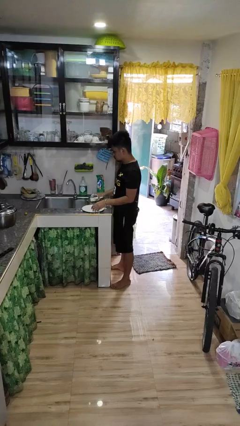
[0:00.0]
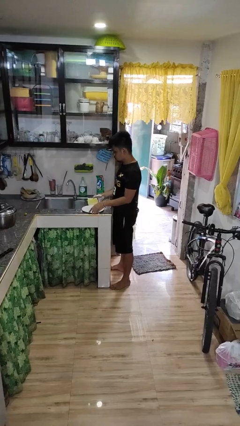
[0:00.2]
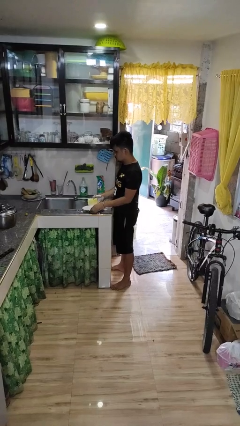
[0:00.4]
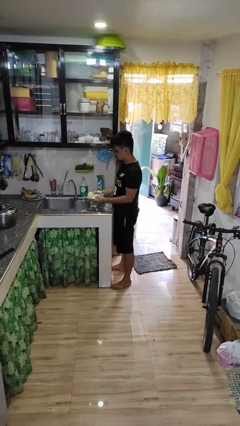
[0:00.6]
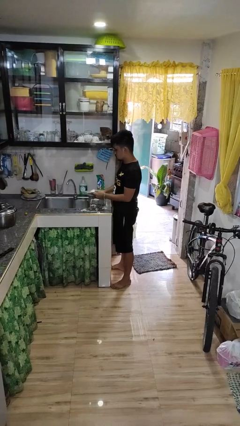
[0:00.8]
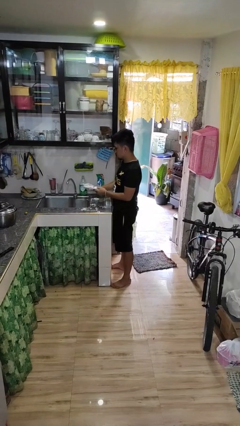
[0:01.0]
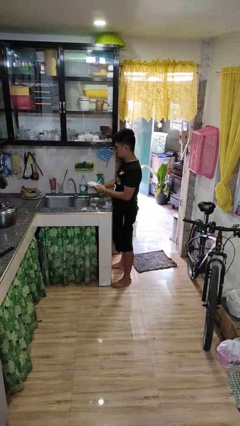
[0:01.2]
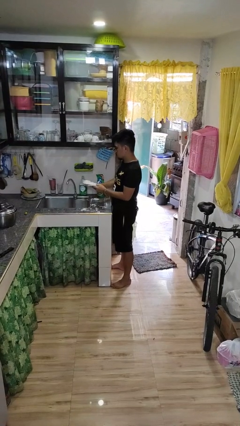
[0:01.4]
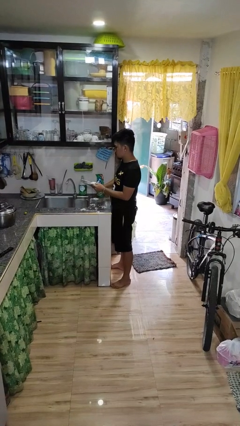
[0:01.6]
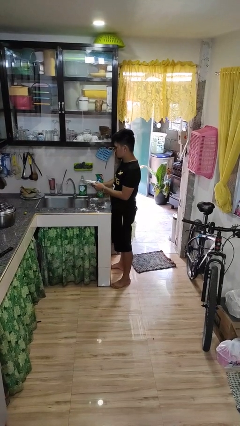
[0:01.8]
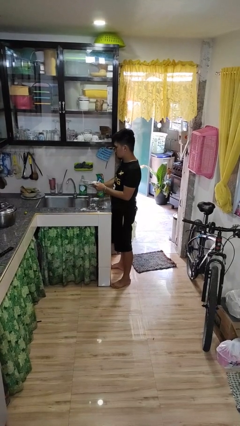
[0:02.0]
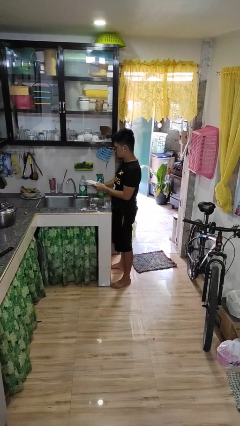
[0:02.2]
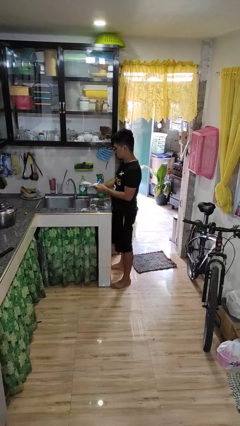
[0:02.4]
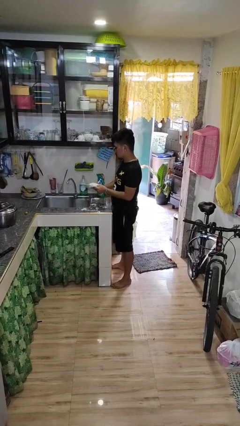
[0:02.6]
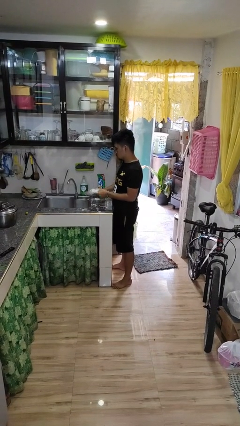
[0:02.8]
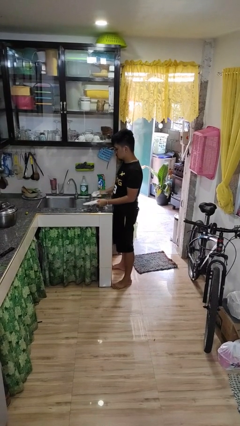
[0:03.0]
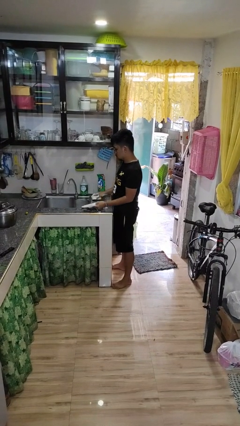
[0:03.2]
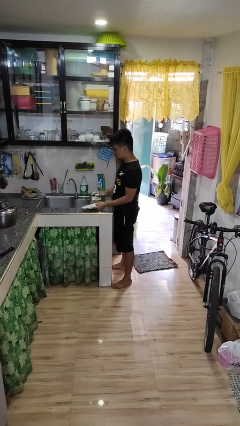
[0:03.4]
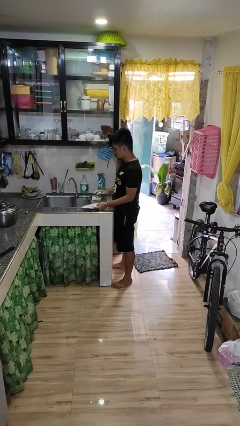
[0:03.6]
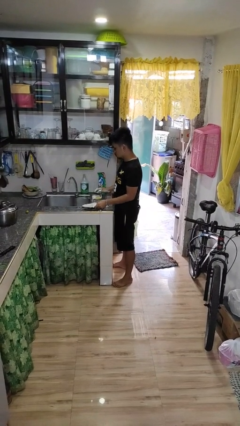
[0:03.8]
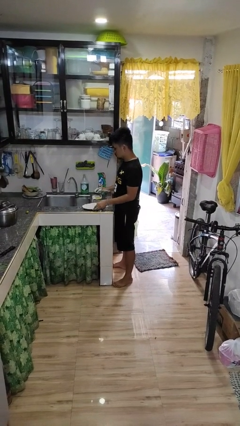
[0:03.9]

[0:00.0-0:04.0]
person washes dish

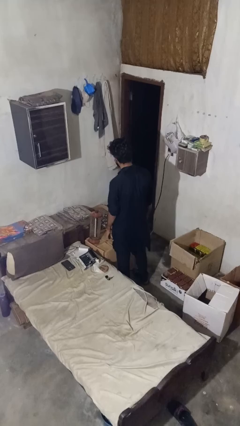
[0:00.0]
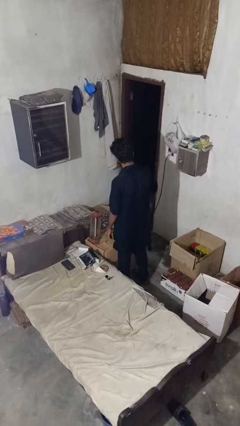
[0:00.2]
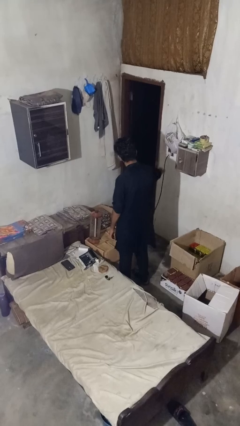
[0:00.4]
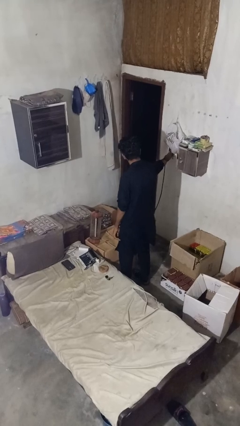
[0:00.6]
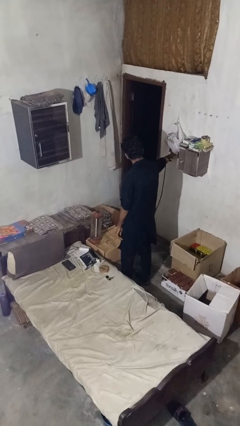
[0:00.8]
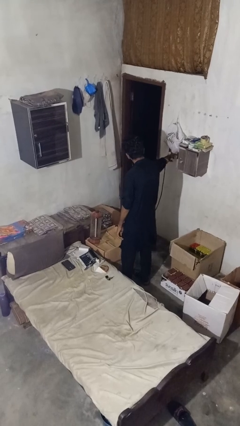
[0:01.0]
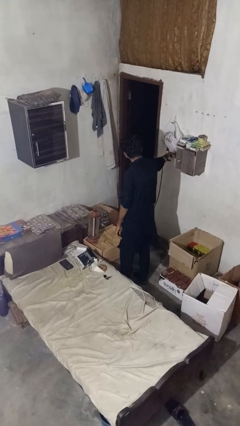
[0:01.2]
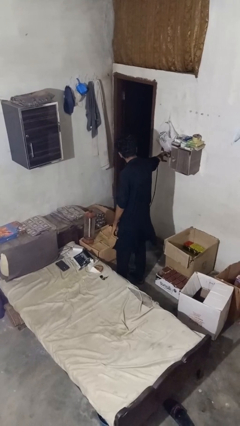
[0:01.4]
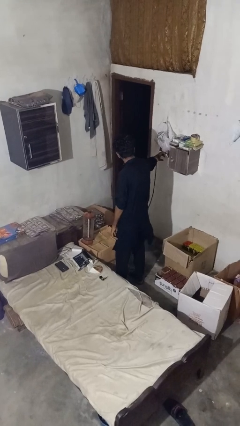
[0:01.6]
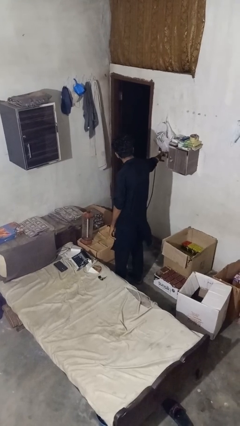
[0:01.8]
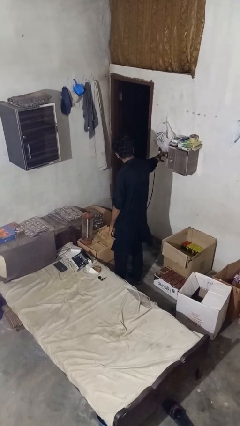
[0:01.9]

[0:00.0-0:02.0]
person turns on lamp

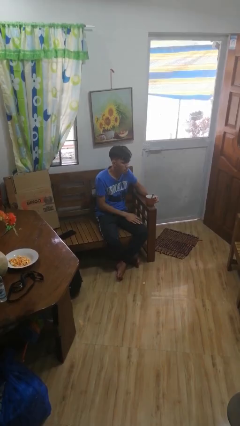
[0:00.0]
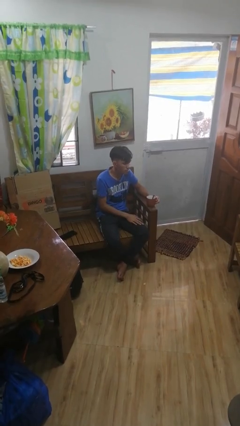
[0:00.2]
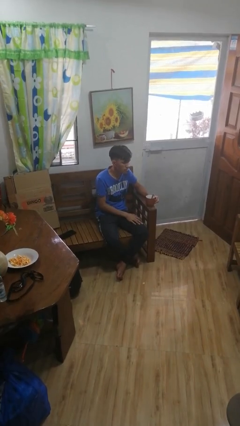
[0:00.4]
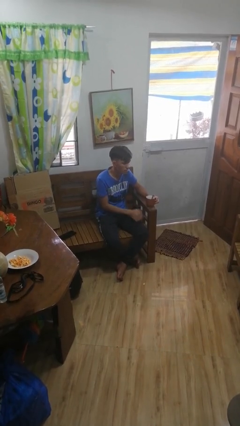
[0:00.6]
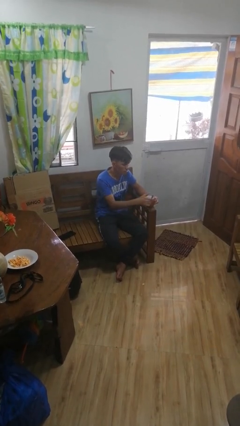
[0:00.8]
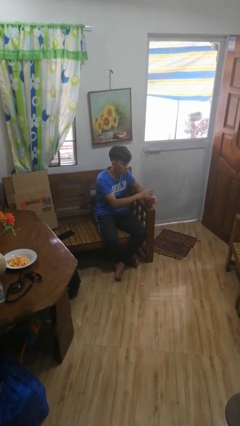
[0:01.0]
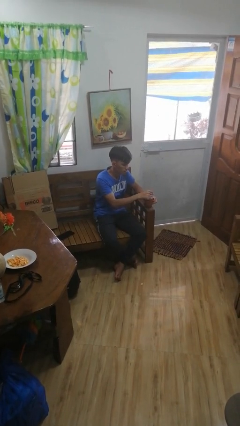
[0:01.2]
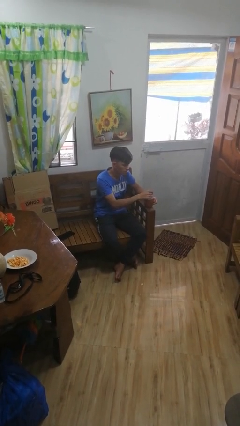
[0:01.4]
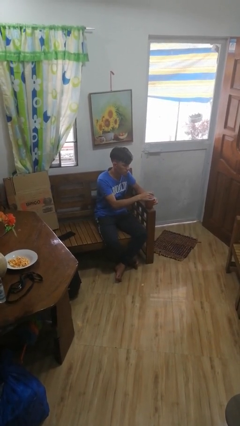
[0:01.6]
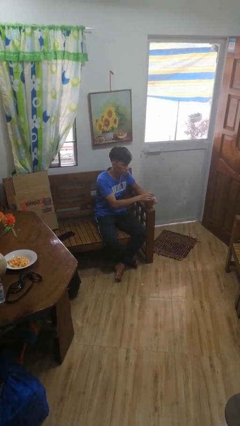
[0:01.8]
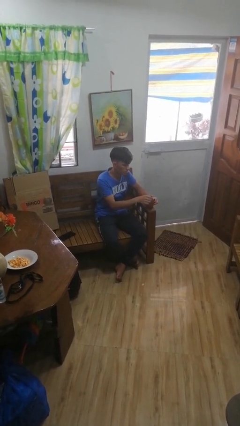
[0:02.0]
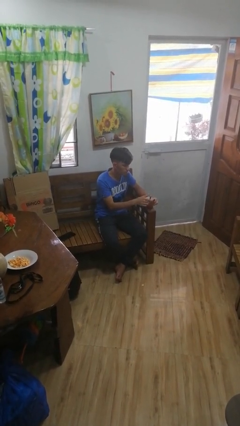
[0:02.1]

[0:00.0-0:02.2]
person stirs mug

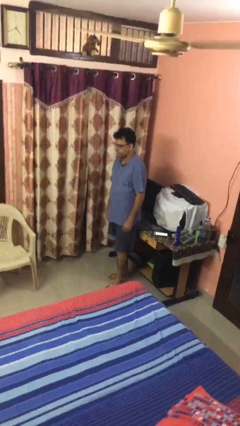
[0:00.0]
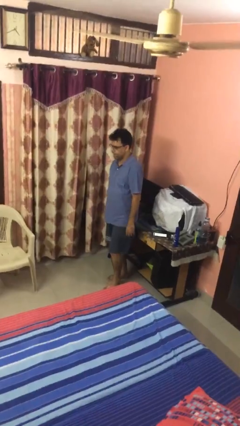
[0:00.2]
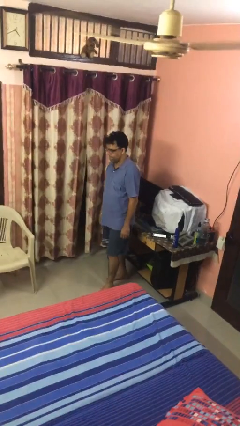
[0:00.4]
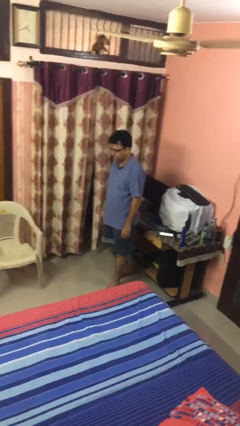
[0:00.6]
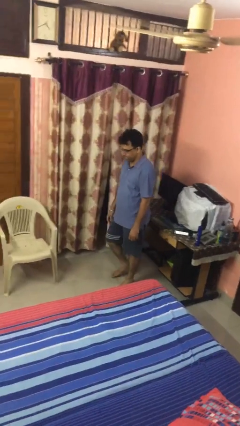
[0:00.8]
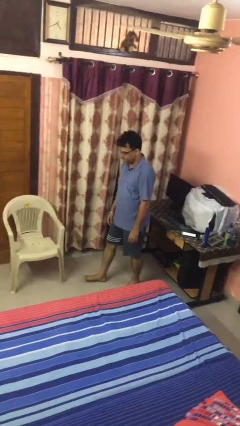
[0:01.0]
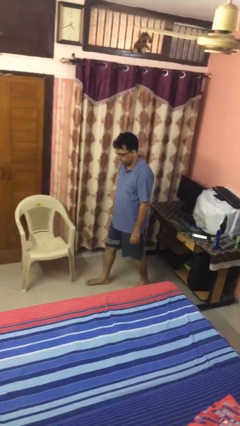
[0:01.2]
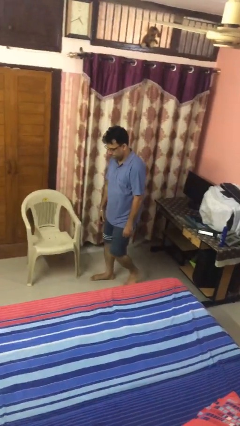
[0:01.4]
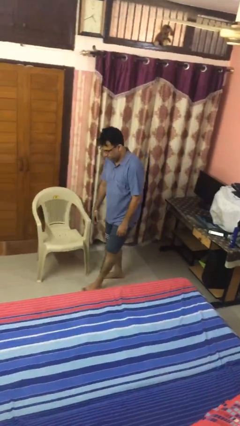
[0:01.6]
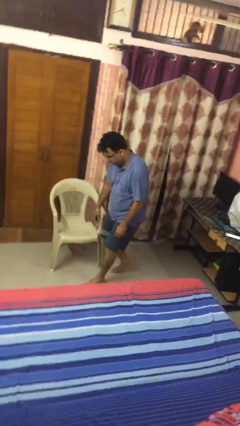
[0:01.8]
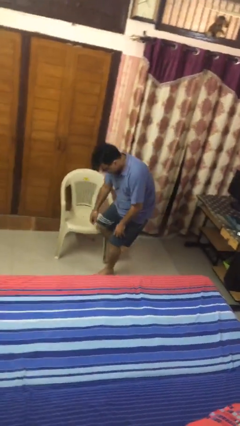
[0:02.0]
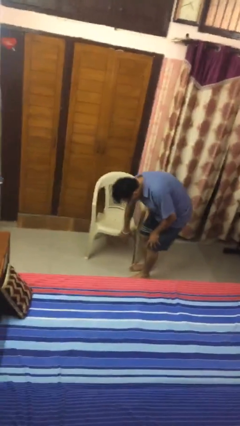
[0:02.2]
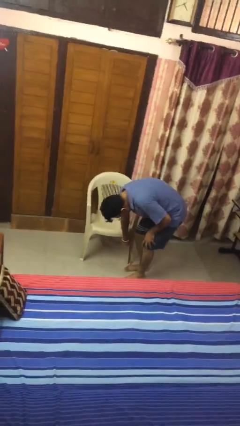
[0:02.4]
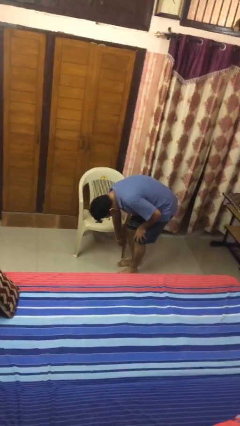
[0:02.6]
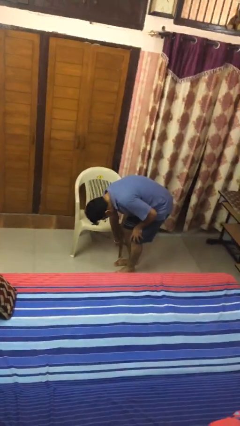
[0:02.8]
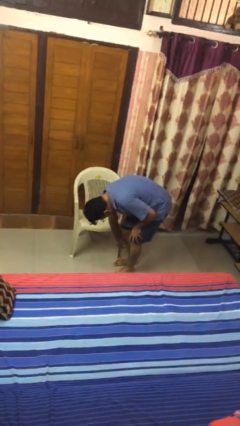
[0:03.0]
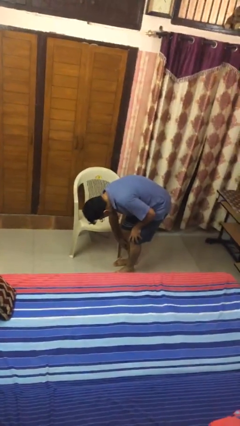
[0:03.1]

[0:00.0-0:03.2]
person stubs toe

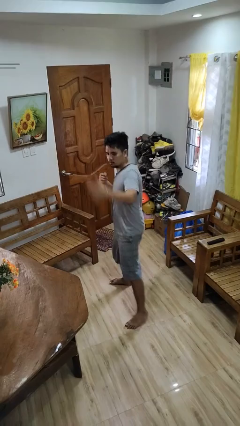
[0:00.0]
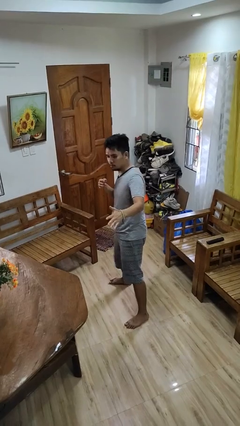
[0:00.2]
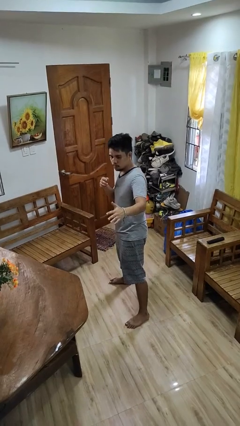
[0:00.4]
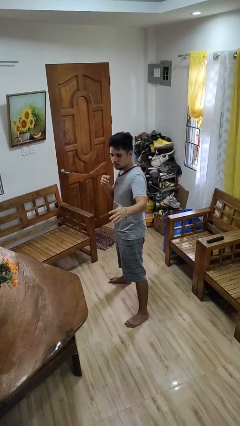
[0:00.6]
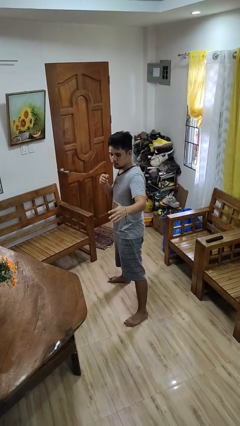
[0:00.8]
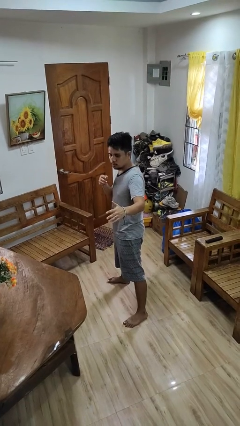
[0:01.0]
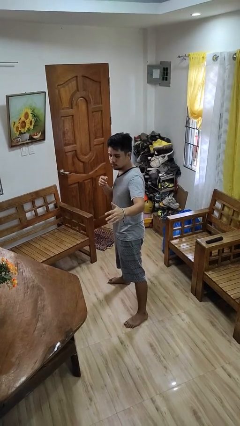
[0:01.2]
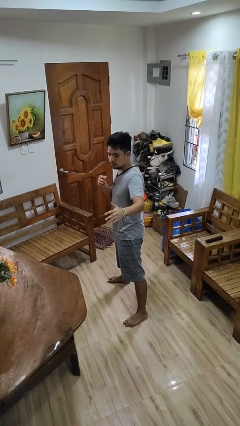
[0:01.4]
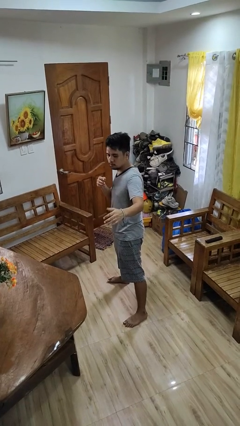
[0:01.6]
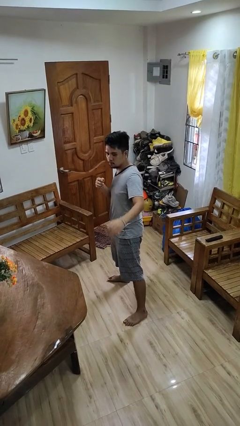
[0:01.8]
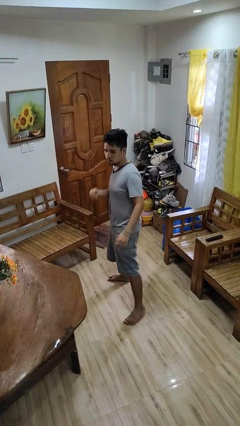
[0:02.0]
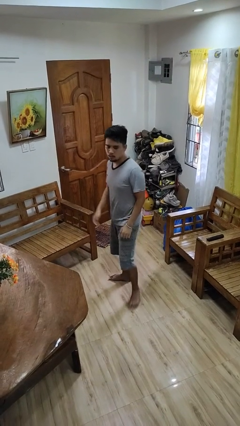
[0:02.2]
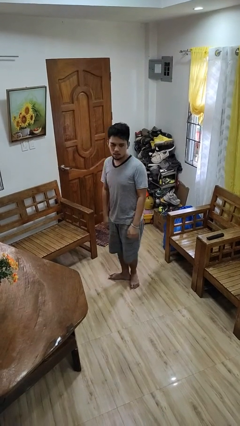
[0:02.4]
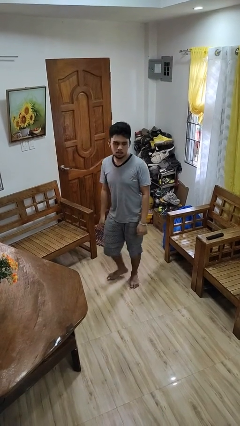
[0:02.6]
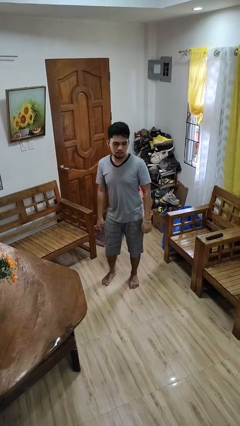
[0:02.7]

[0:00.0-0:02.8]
person karate chop

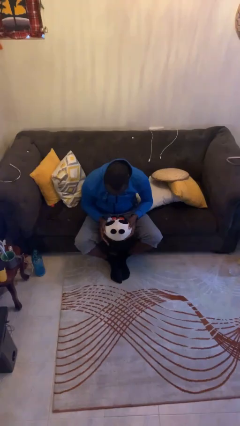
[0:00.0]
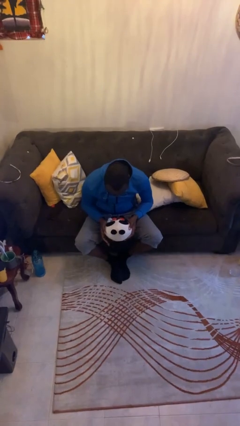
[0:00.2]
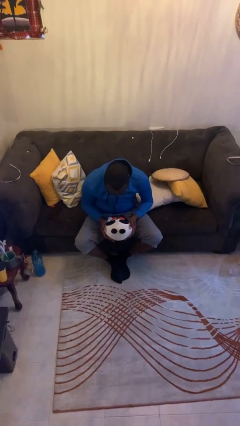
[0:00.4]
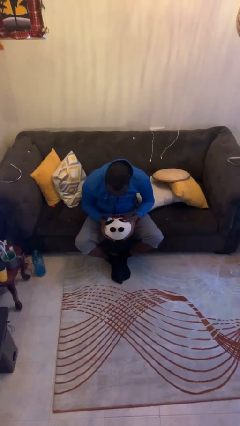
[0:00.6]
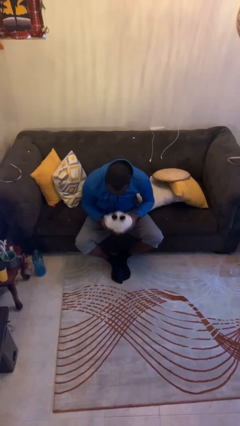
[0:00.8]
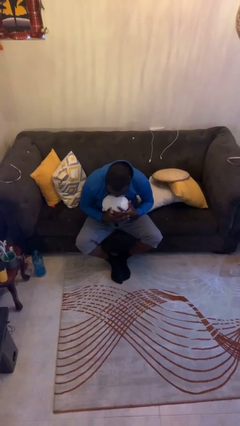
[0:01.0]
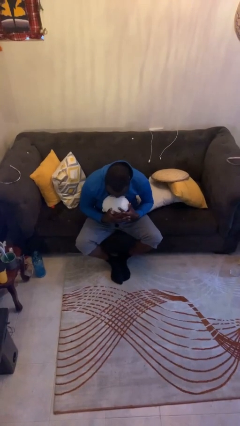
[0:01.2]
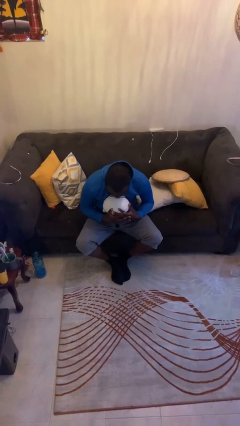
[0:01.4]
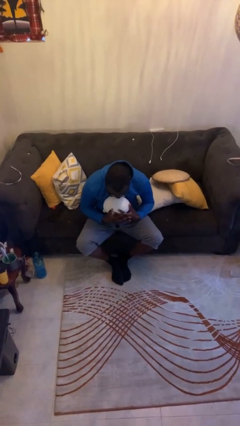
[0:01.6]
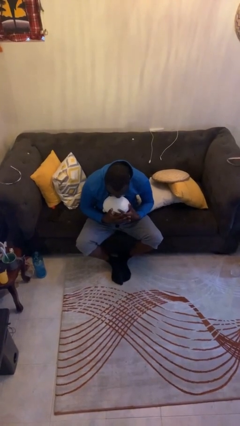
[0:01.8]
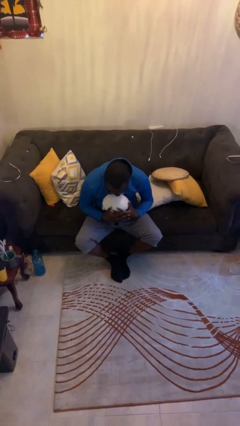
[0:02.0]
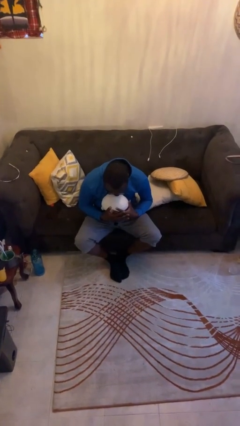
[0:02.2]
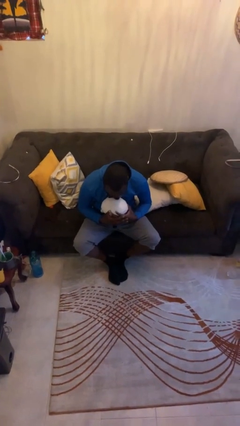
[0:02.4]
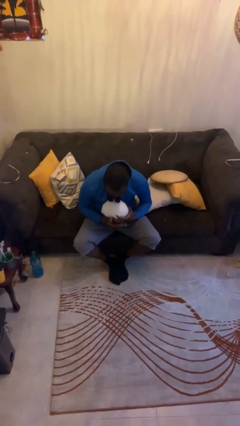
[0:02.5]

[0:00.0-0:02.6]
person hugs stuffed animal

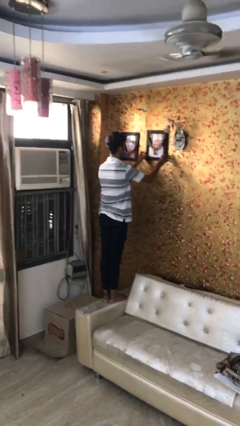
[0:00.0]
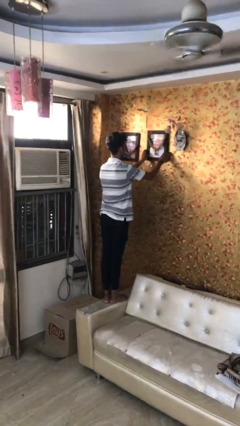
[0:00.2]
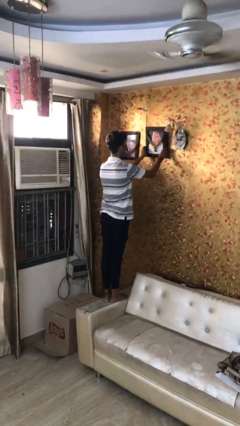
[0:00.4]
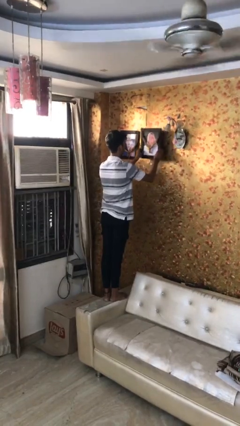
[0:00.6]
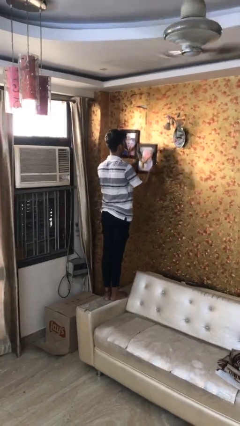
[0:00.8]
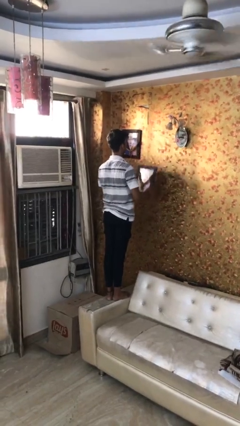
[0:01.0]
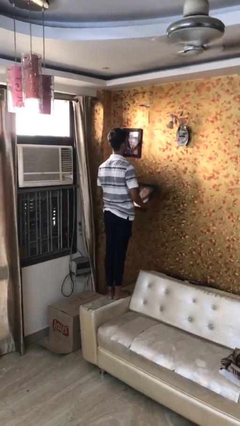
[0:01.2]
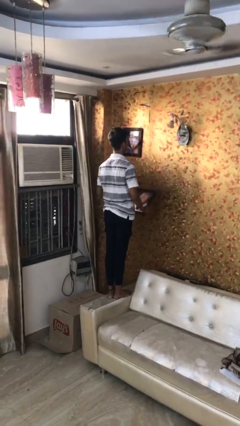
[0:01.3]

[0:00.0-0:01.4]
person takes down picture frame
